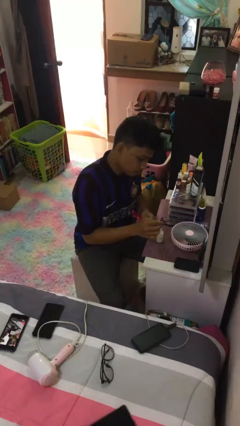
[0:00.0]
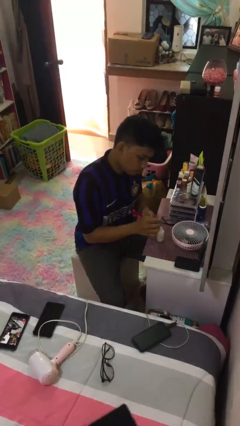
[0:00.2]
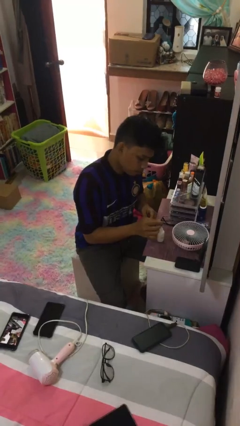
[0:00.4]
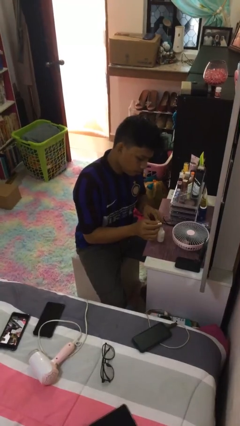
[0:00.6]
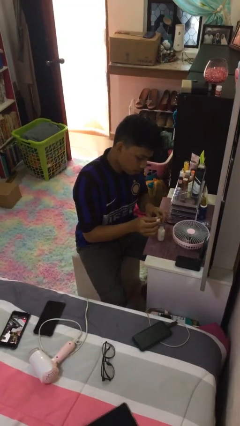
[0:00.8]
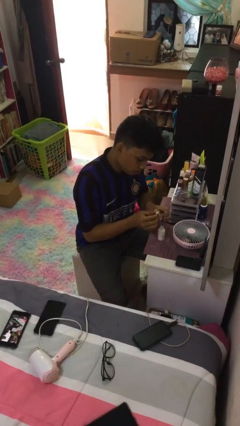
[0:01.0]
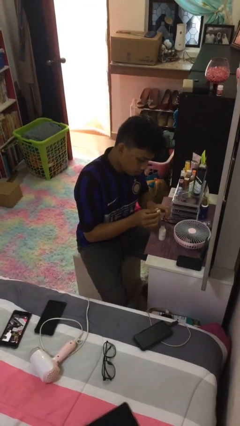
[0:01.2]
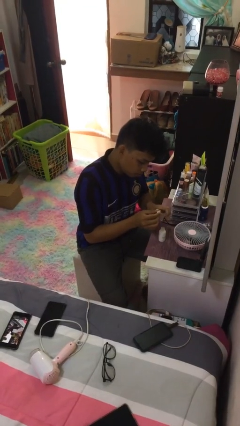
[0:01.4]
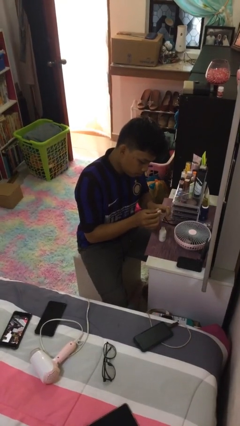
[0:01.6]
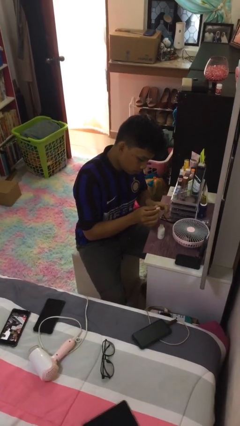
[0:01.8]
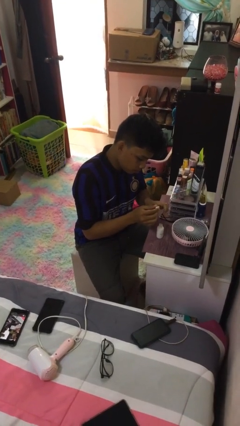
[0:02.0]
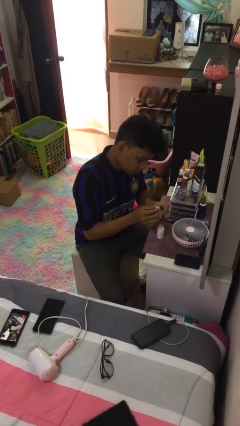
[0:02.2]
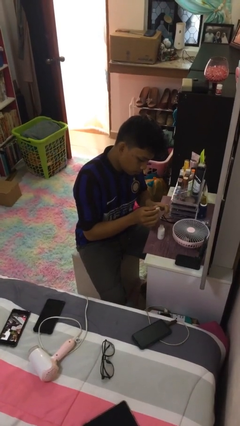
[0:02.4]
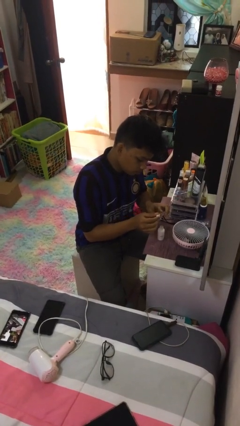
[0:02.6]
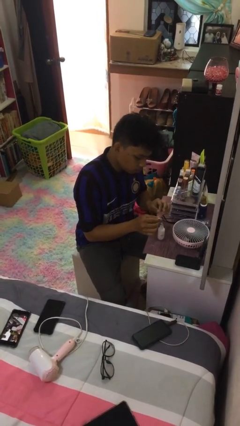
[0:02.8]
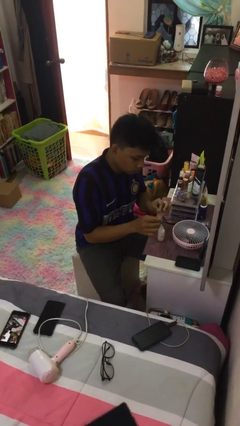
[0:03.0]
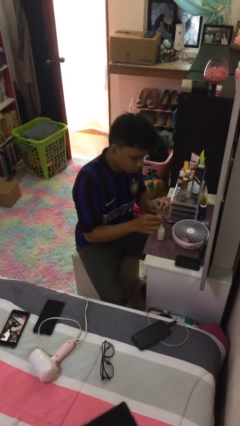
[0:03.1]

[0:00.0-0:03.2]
person paints fingernails

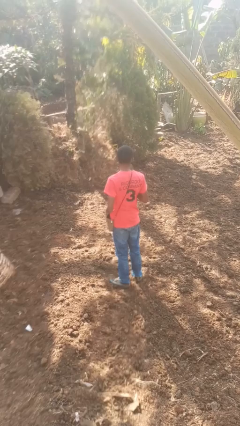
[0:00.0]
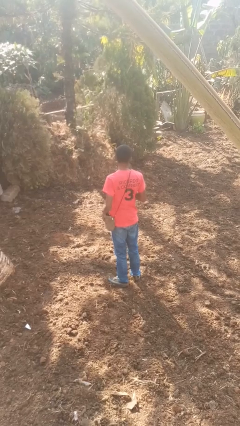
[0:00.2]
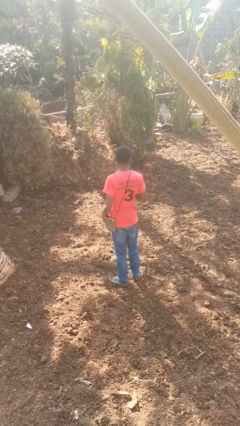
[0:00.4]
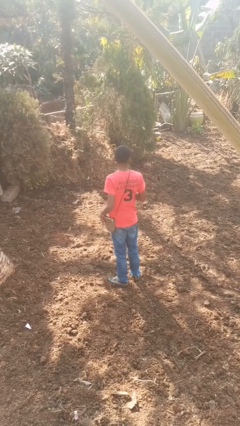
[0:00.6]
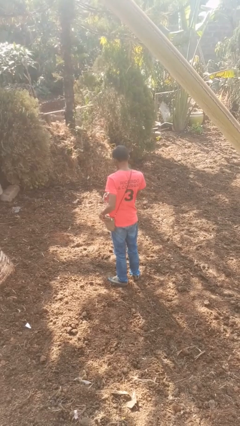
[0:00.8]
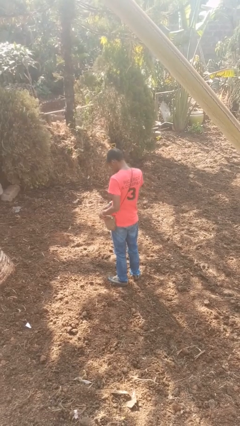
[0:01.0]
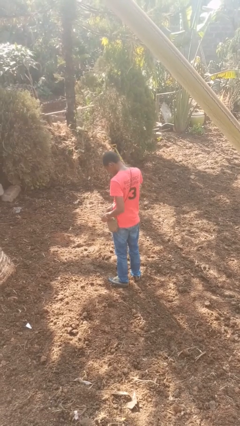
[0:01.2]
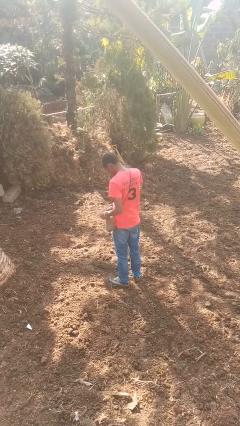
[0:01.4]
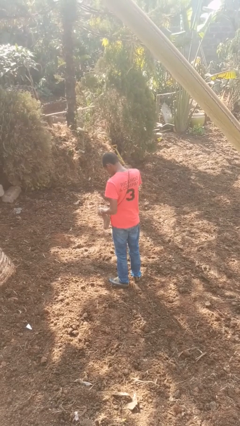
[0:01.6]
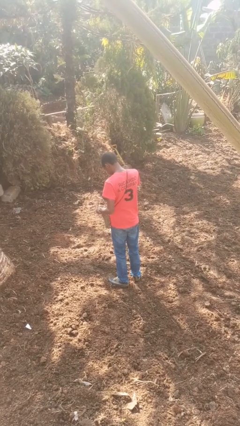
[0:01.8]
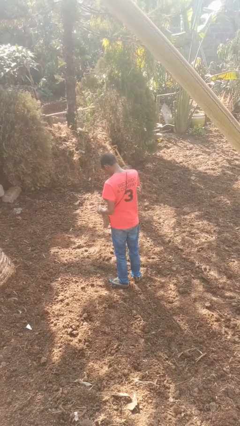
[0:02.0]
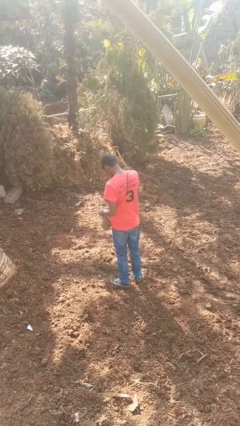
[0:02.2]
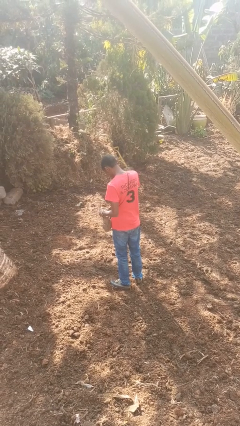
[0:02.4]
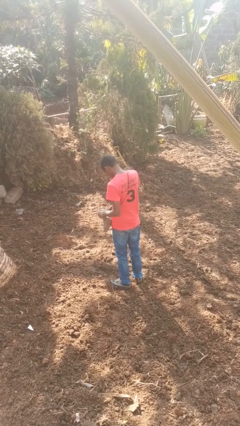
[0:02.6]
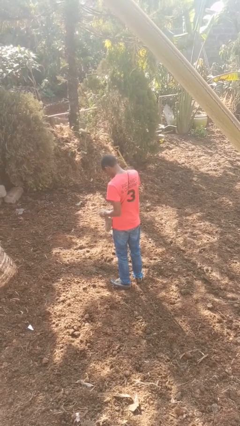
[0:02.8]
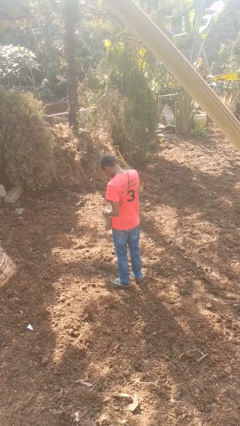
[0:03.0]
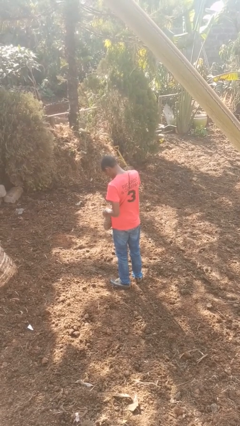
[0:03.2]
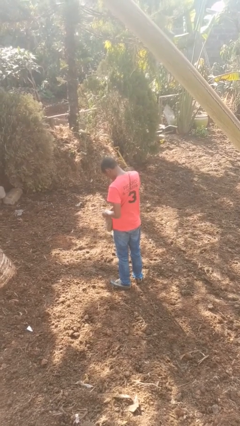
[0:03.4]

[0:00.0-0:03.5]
person searches in purse

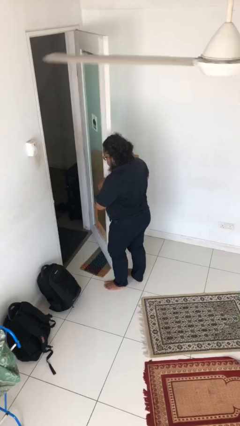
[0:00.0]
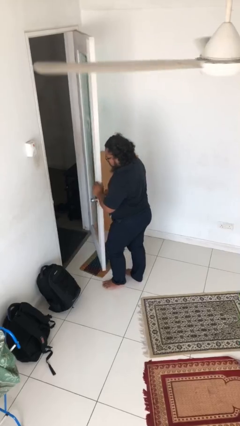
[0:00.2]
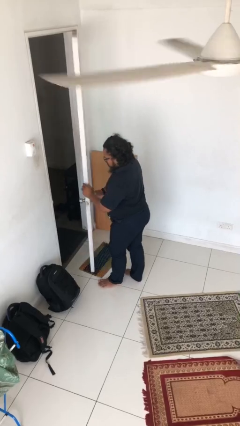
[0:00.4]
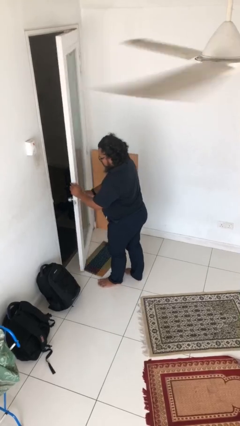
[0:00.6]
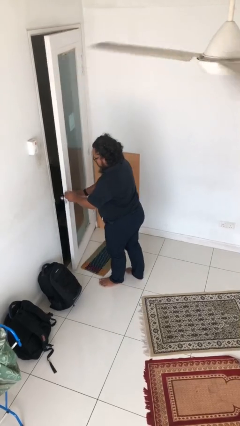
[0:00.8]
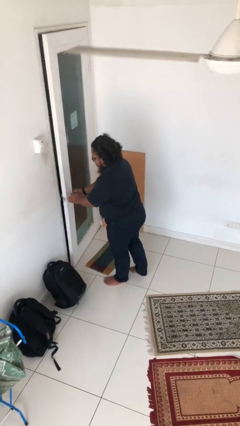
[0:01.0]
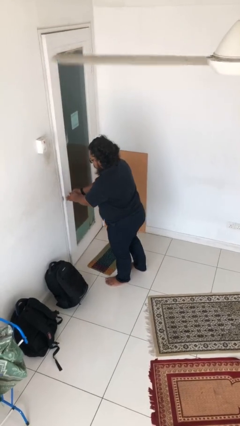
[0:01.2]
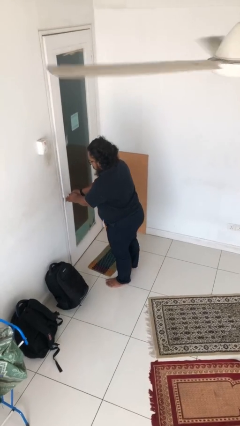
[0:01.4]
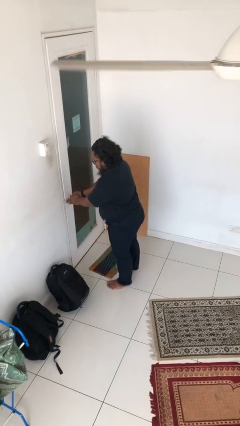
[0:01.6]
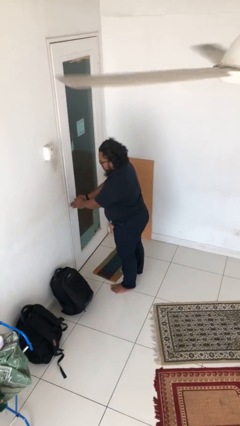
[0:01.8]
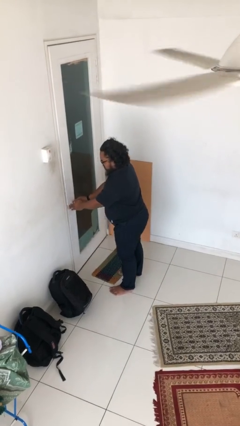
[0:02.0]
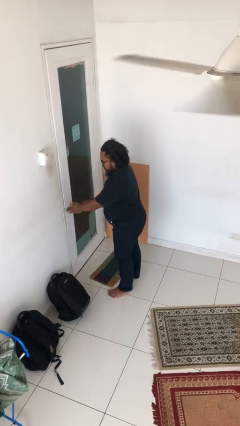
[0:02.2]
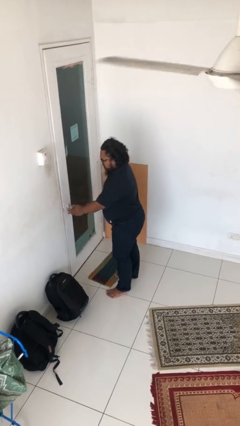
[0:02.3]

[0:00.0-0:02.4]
person closes facility door

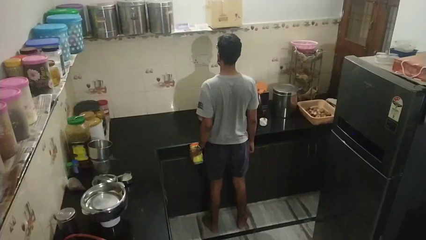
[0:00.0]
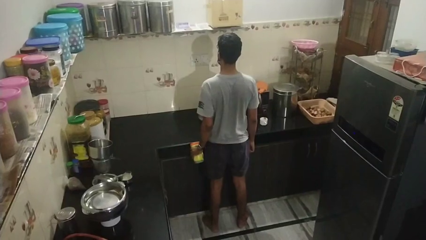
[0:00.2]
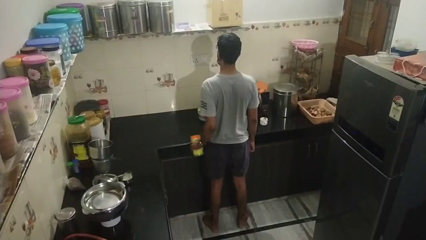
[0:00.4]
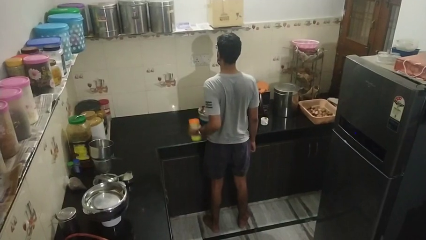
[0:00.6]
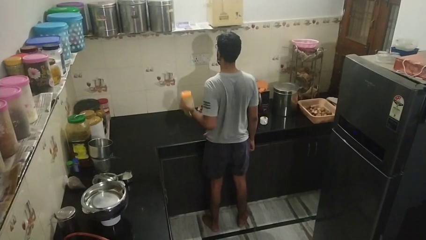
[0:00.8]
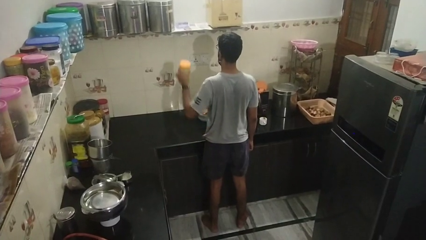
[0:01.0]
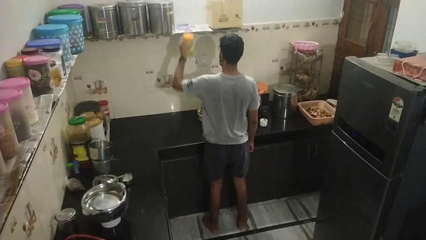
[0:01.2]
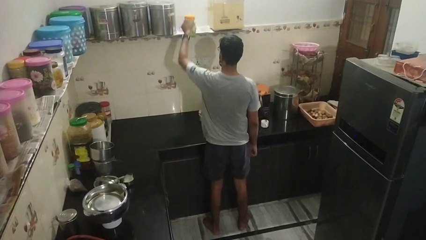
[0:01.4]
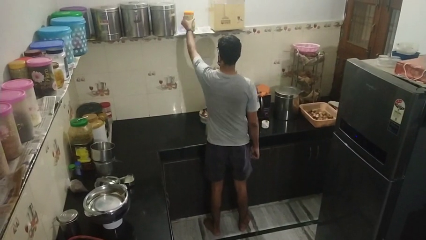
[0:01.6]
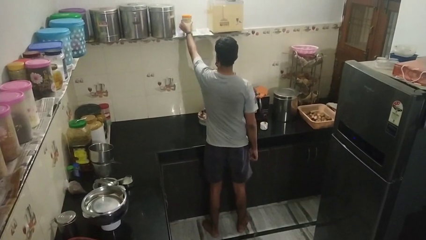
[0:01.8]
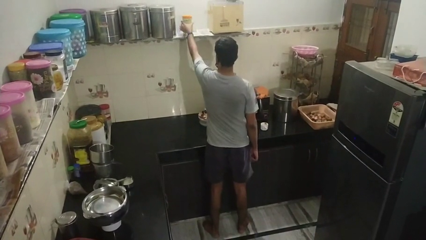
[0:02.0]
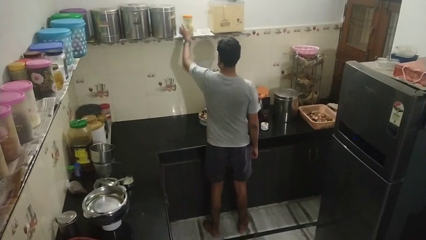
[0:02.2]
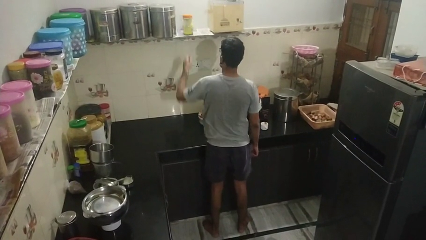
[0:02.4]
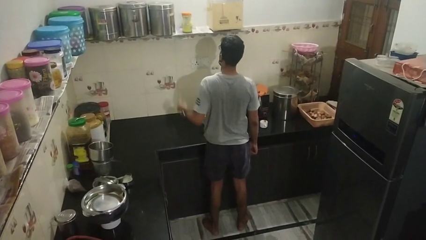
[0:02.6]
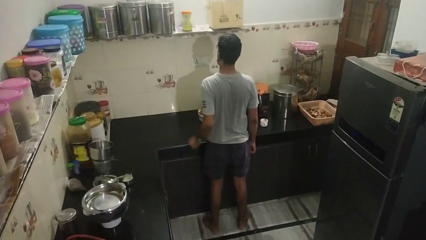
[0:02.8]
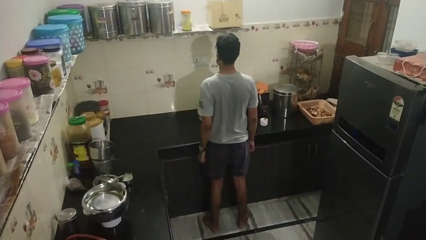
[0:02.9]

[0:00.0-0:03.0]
person puts down object on shelf

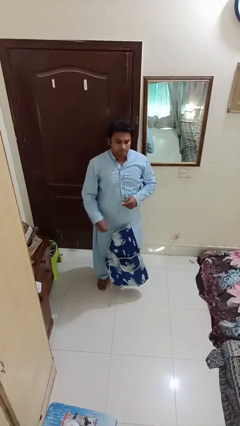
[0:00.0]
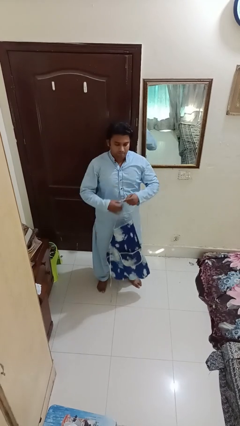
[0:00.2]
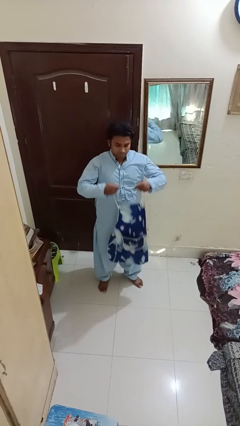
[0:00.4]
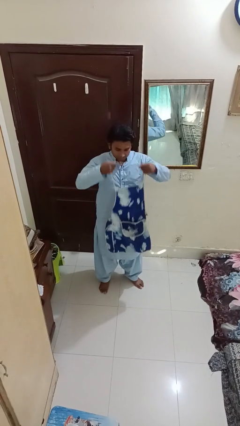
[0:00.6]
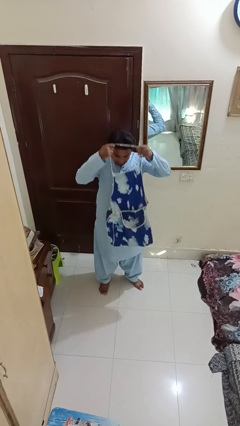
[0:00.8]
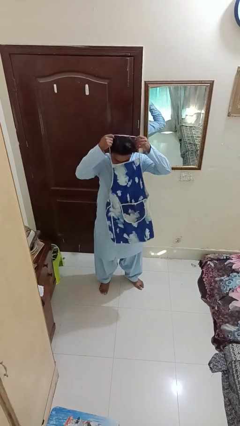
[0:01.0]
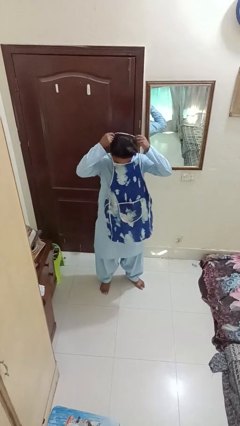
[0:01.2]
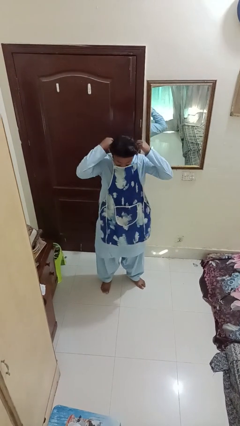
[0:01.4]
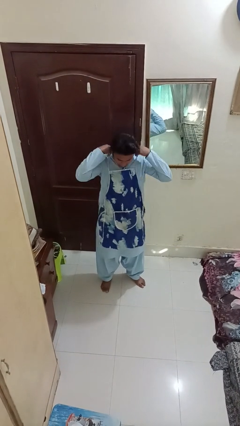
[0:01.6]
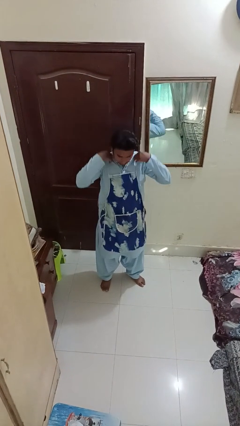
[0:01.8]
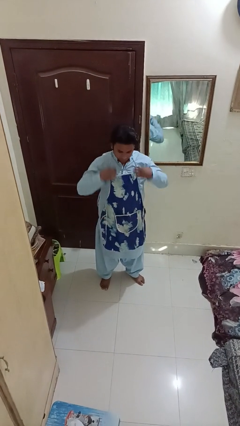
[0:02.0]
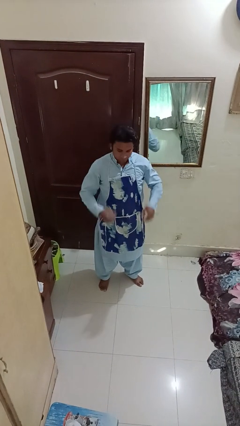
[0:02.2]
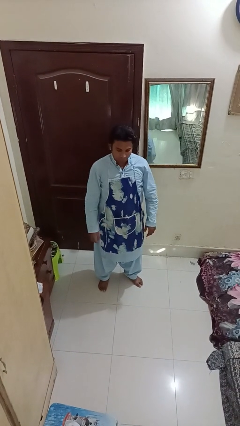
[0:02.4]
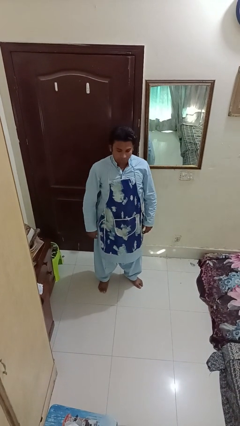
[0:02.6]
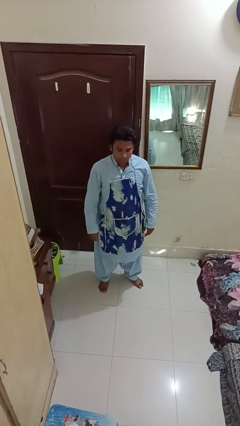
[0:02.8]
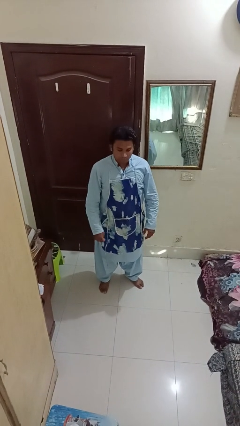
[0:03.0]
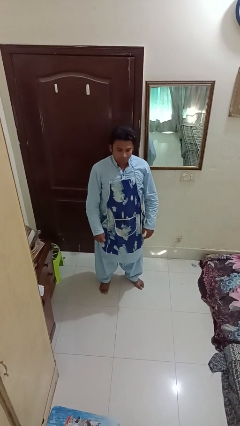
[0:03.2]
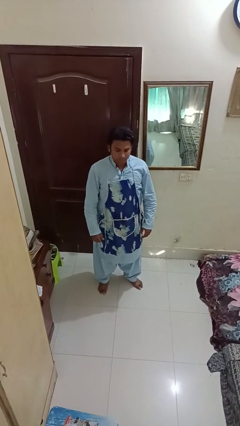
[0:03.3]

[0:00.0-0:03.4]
person puts on apron

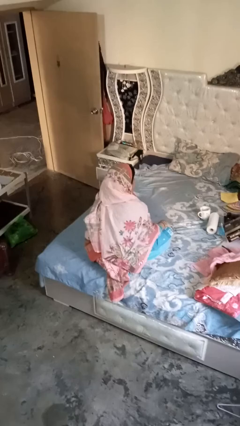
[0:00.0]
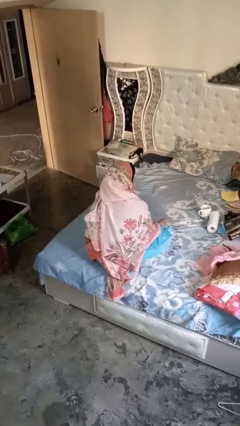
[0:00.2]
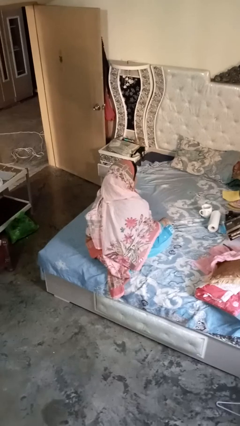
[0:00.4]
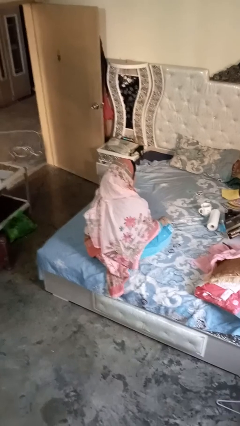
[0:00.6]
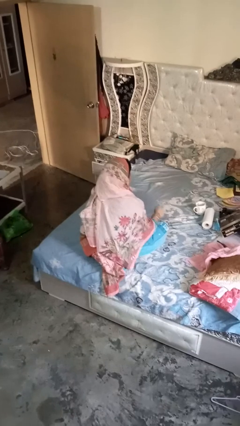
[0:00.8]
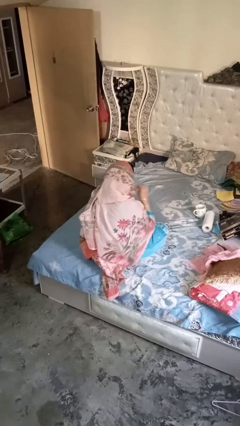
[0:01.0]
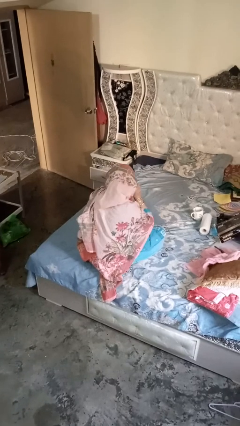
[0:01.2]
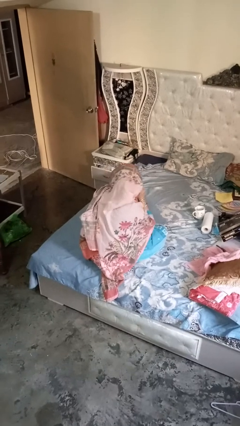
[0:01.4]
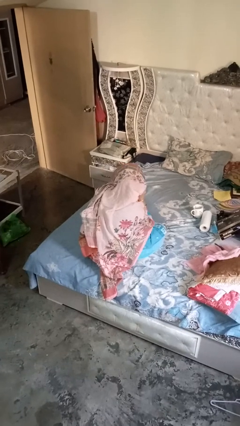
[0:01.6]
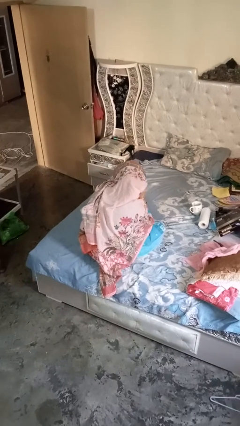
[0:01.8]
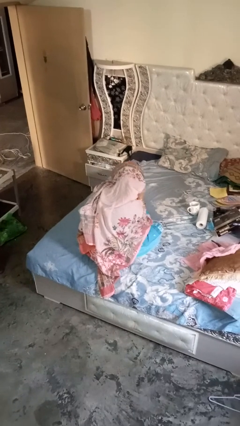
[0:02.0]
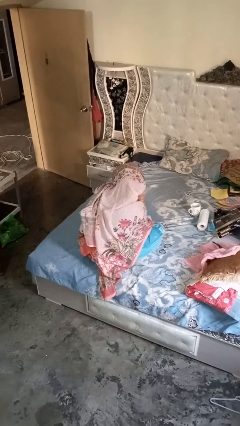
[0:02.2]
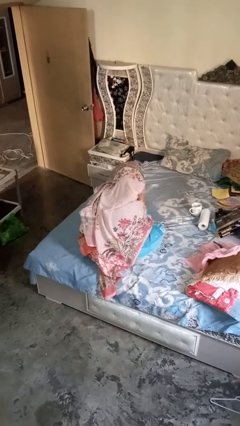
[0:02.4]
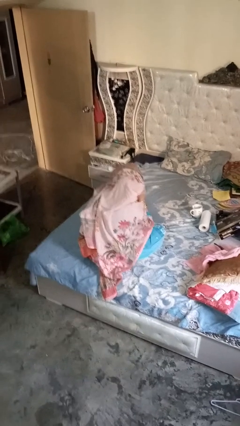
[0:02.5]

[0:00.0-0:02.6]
person gestures listen closely
